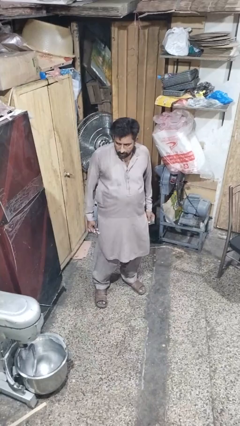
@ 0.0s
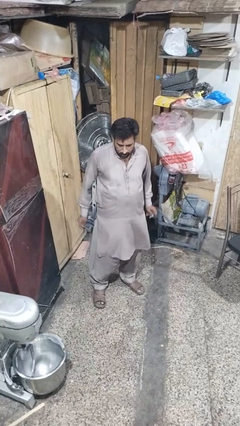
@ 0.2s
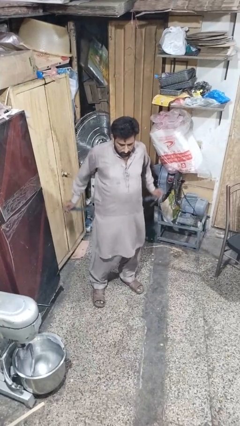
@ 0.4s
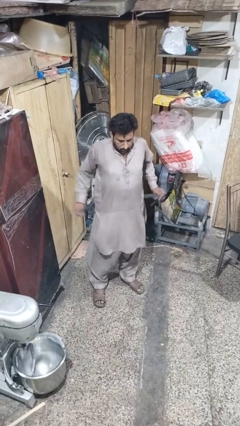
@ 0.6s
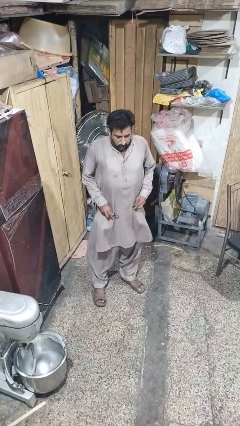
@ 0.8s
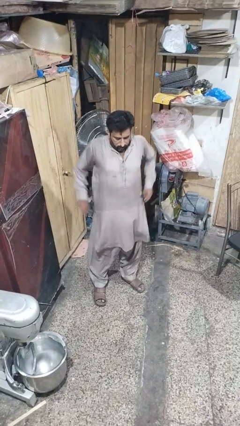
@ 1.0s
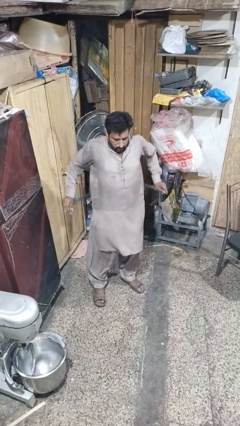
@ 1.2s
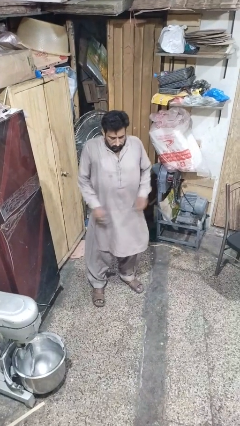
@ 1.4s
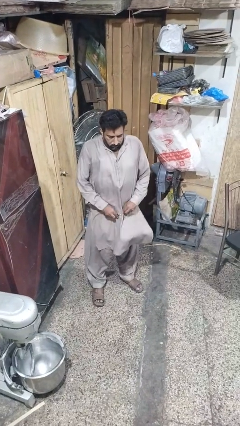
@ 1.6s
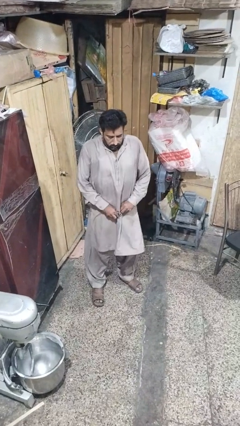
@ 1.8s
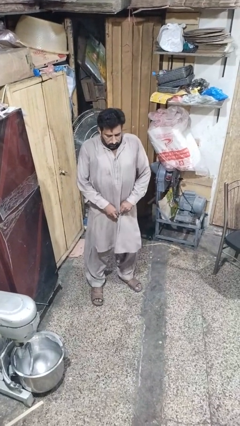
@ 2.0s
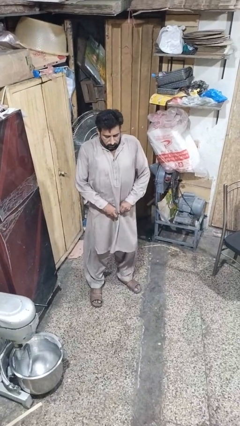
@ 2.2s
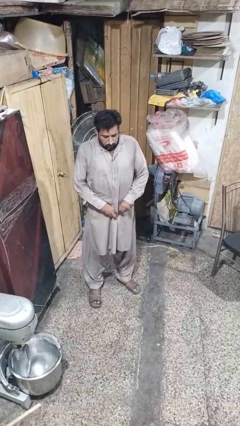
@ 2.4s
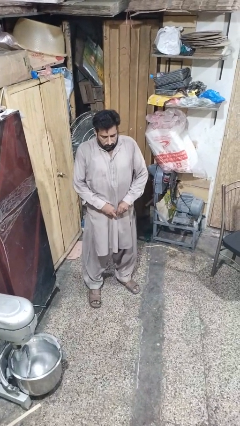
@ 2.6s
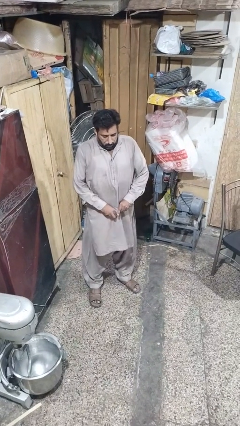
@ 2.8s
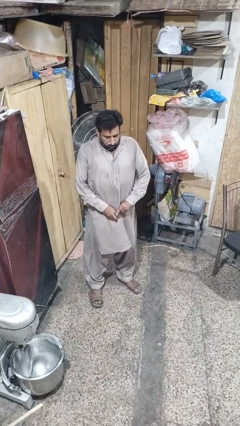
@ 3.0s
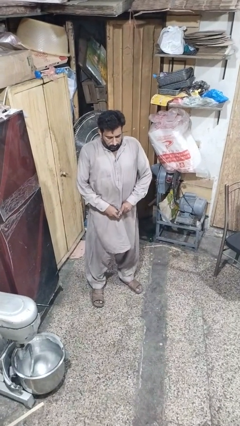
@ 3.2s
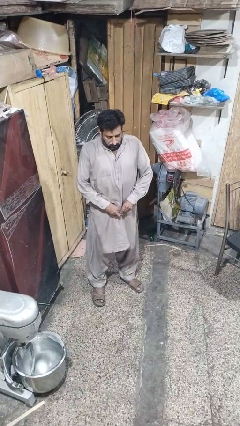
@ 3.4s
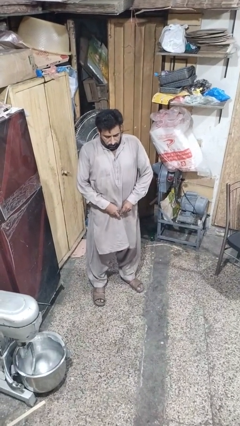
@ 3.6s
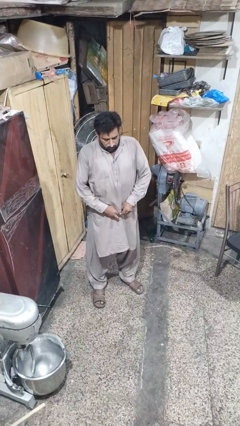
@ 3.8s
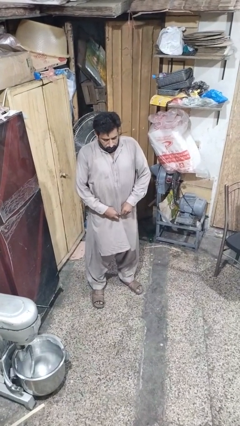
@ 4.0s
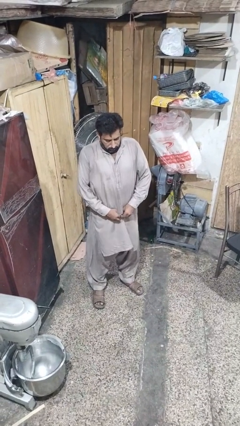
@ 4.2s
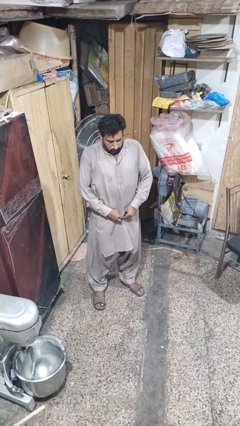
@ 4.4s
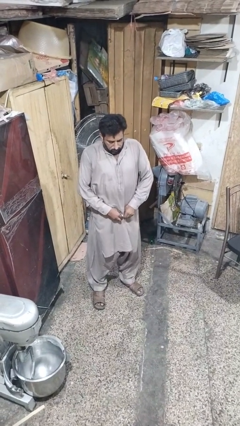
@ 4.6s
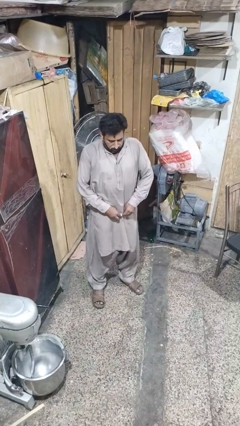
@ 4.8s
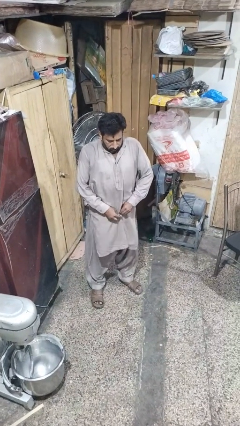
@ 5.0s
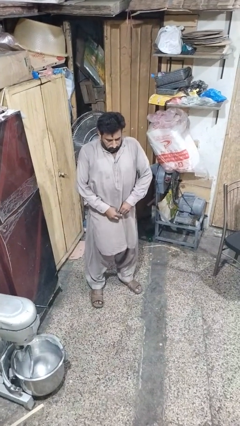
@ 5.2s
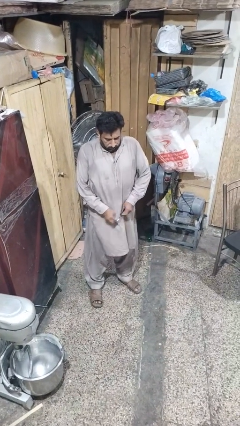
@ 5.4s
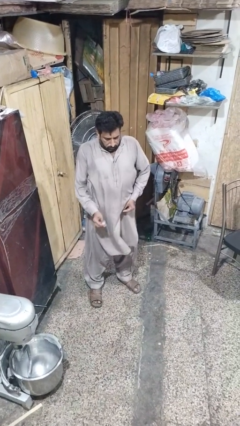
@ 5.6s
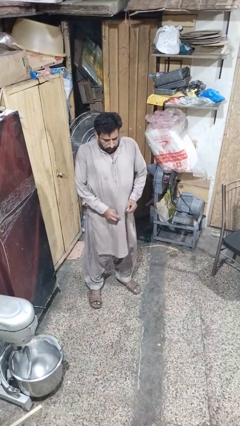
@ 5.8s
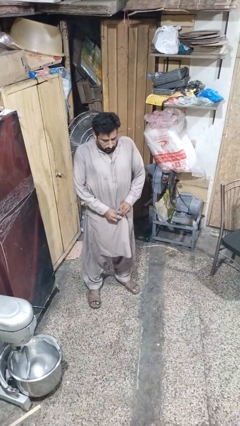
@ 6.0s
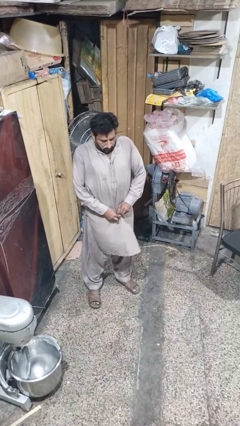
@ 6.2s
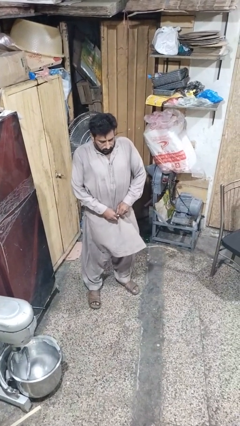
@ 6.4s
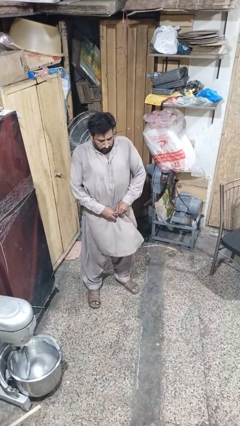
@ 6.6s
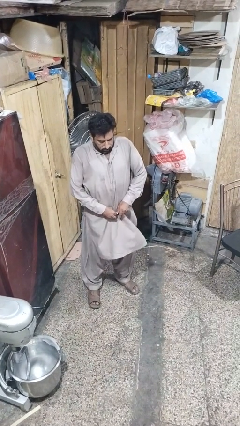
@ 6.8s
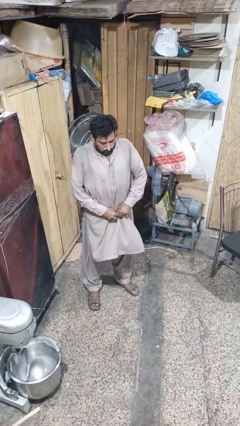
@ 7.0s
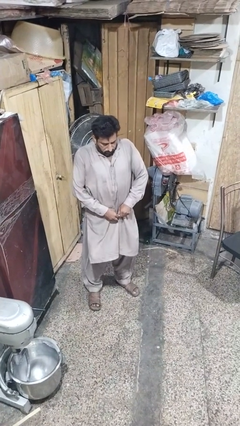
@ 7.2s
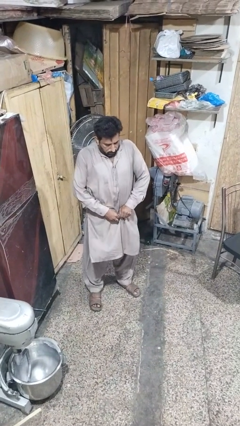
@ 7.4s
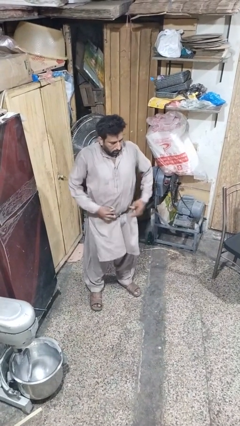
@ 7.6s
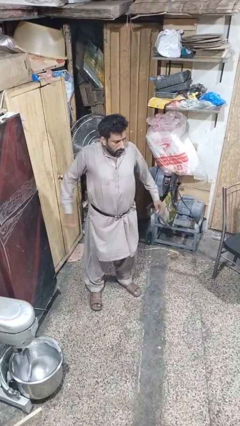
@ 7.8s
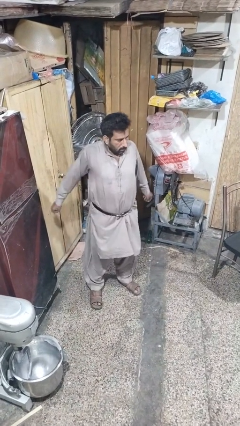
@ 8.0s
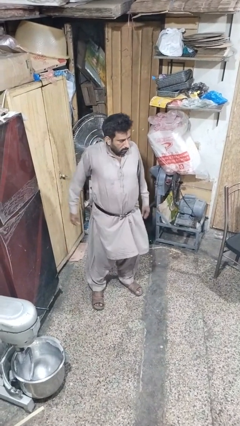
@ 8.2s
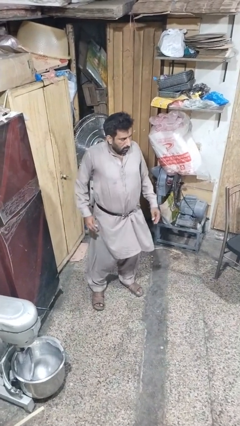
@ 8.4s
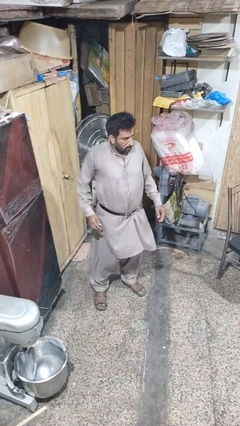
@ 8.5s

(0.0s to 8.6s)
person puts on belt

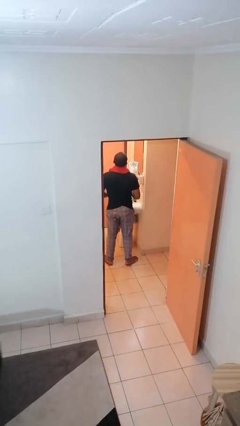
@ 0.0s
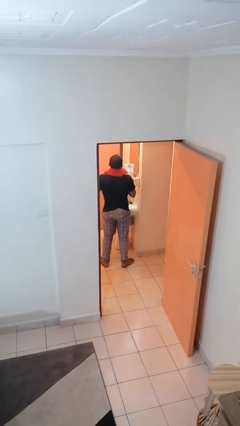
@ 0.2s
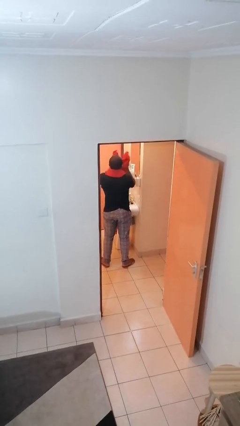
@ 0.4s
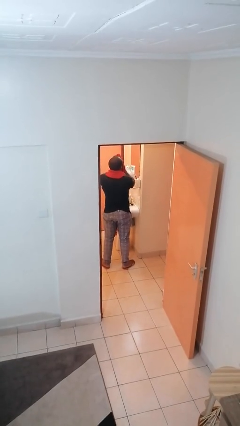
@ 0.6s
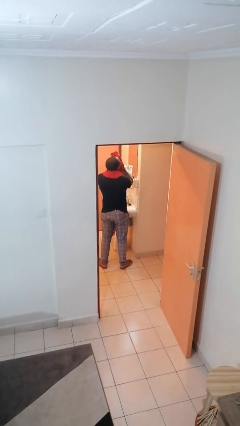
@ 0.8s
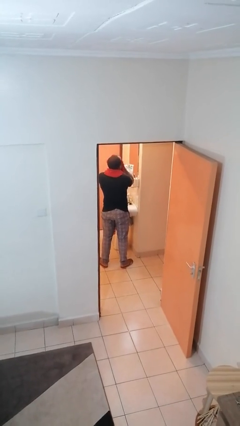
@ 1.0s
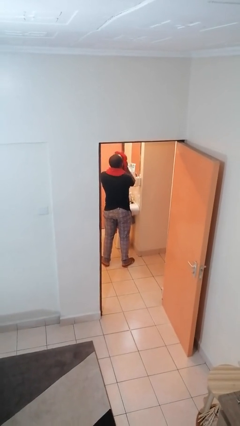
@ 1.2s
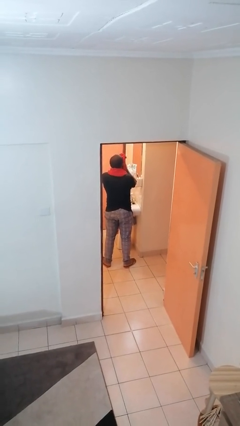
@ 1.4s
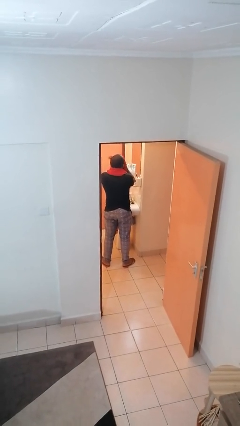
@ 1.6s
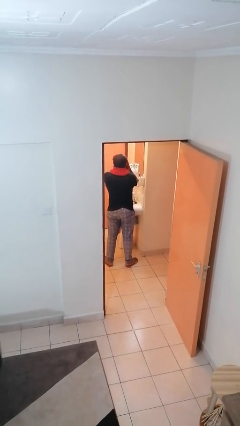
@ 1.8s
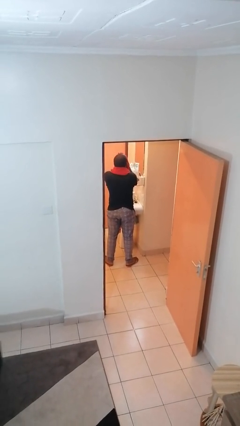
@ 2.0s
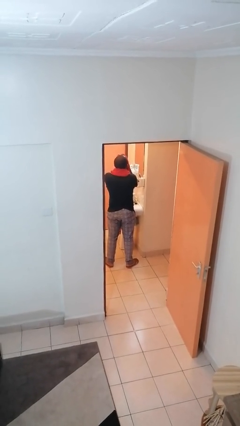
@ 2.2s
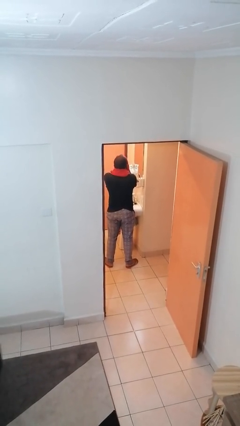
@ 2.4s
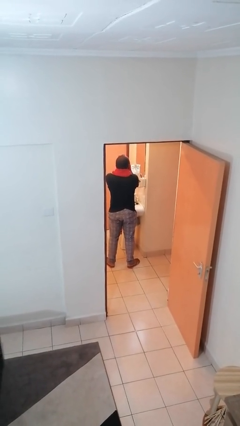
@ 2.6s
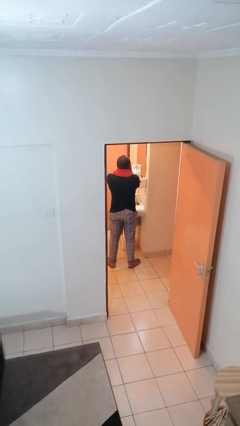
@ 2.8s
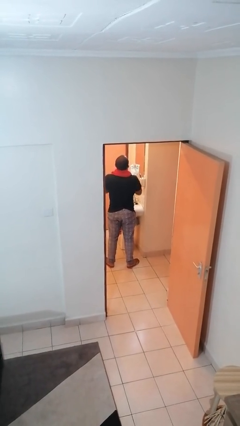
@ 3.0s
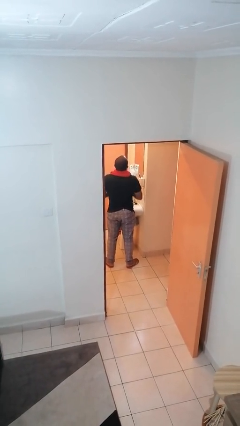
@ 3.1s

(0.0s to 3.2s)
person dries face with towel

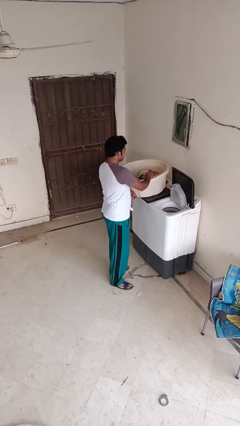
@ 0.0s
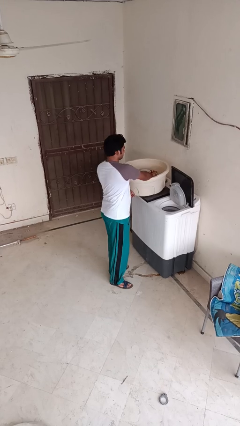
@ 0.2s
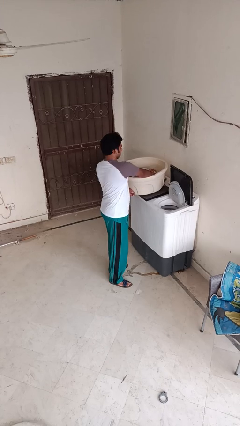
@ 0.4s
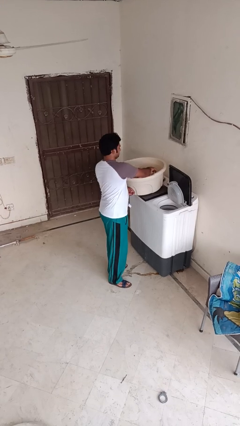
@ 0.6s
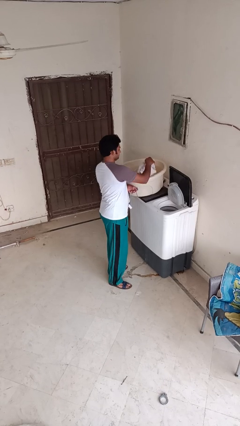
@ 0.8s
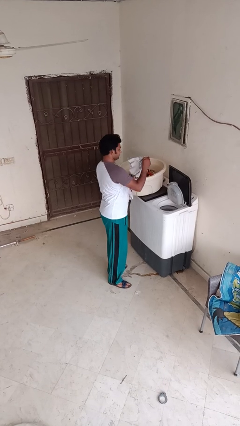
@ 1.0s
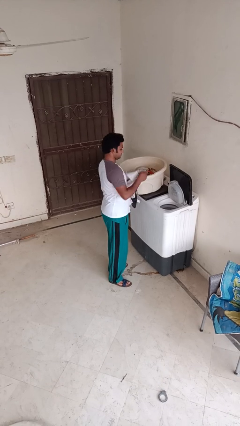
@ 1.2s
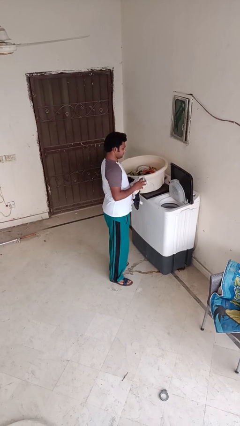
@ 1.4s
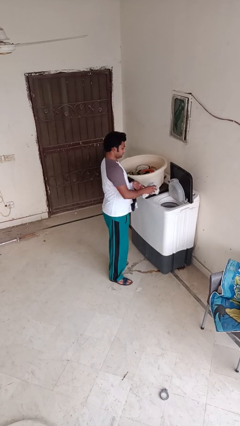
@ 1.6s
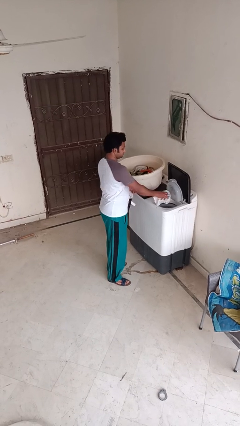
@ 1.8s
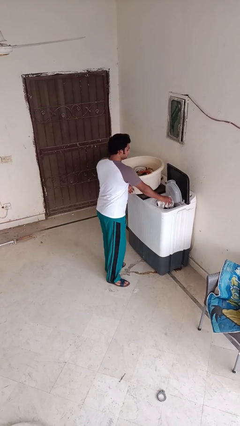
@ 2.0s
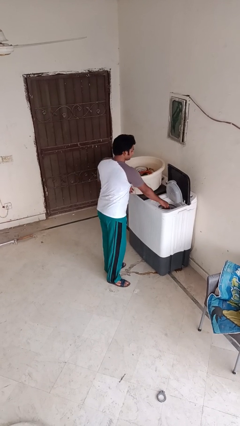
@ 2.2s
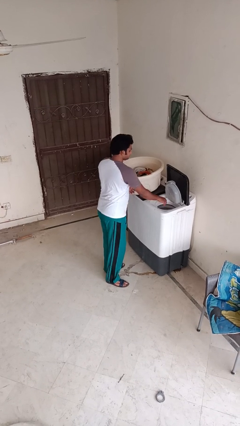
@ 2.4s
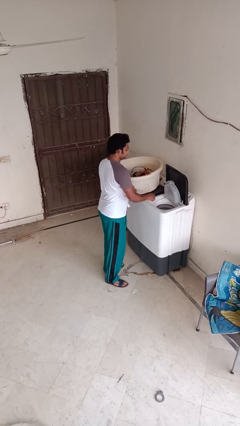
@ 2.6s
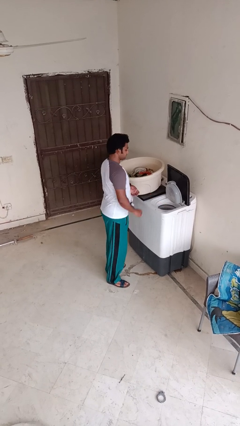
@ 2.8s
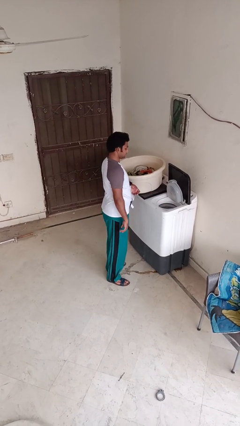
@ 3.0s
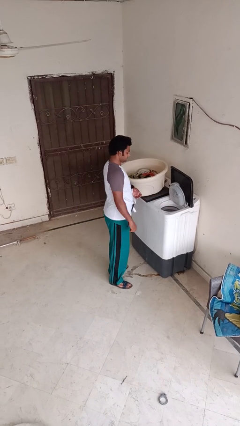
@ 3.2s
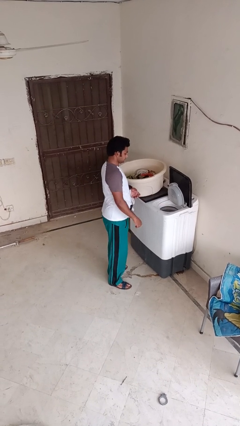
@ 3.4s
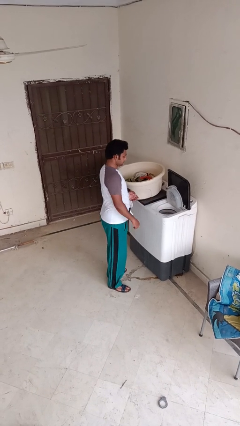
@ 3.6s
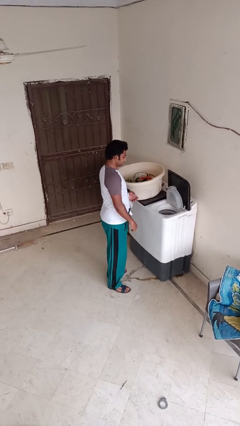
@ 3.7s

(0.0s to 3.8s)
person loads dryer

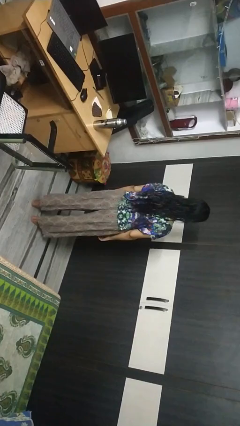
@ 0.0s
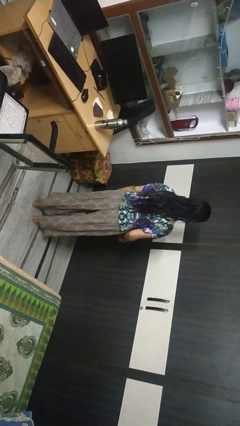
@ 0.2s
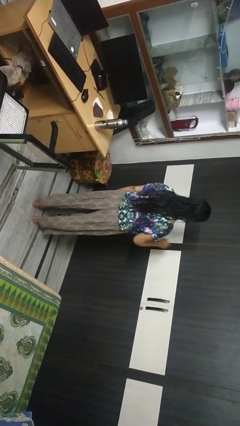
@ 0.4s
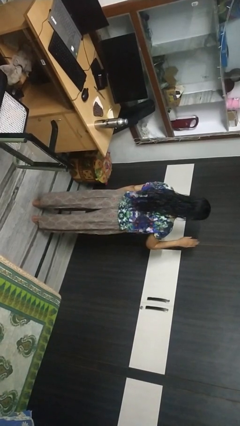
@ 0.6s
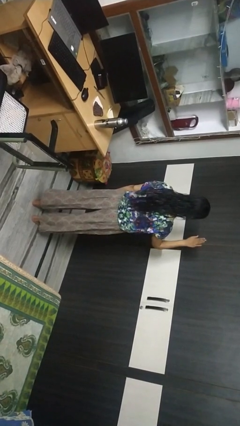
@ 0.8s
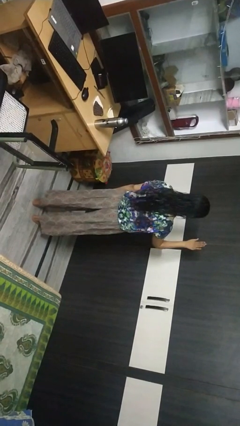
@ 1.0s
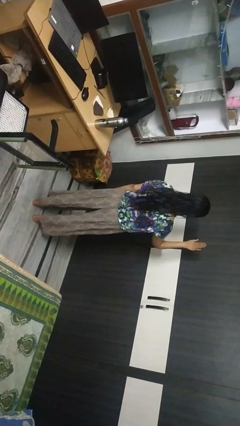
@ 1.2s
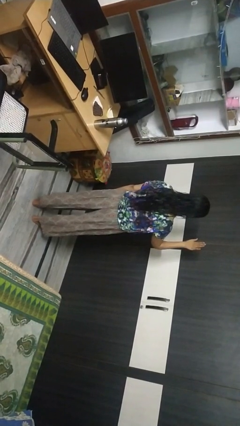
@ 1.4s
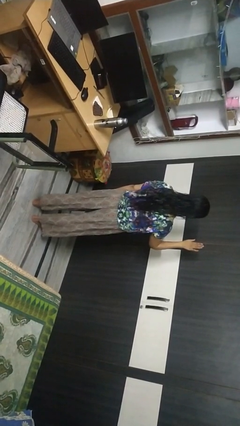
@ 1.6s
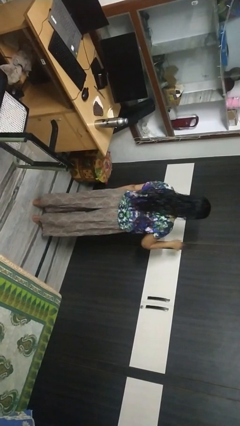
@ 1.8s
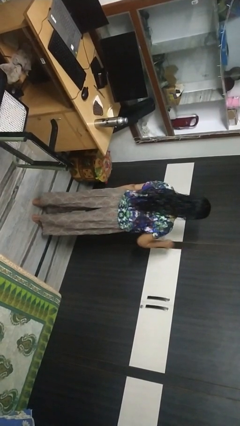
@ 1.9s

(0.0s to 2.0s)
person gestures stop
